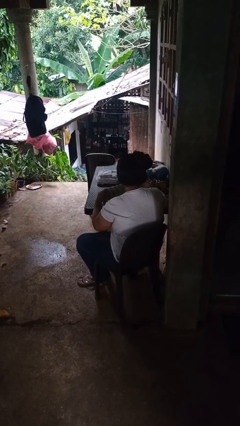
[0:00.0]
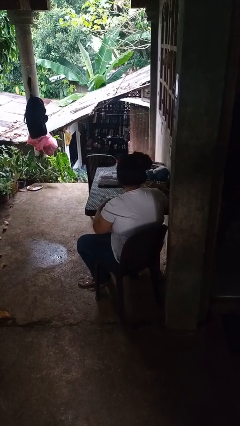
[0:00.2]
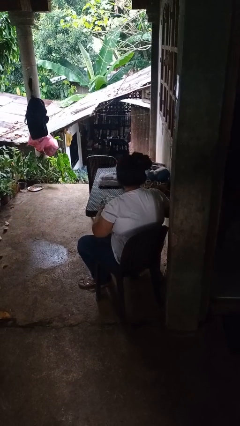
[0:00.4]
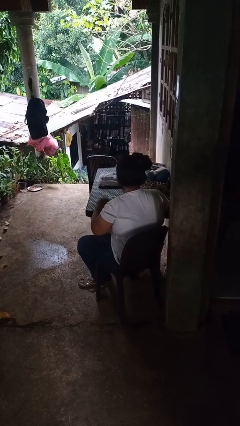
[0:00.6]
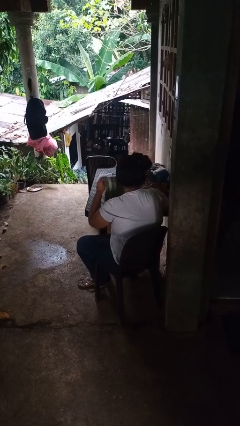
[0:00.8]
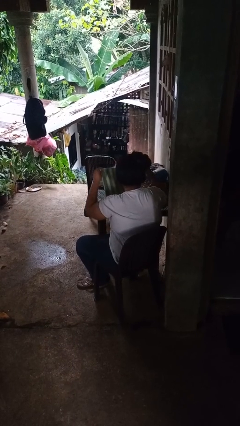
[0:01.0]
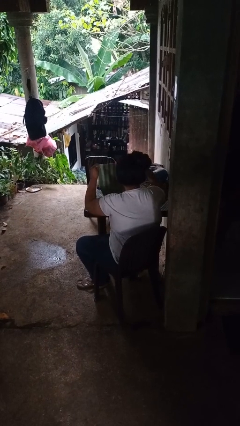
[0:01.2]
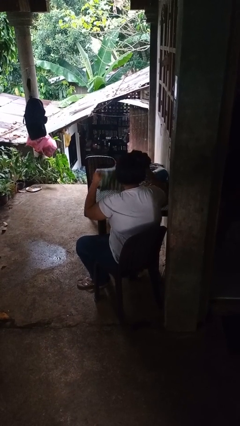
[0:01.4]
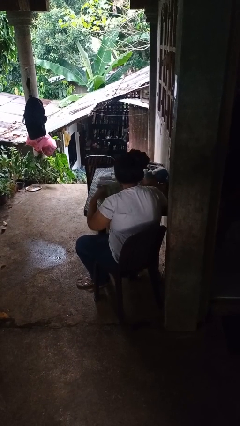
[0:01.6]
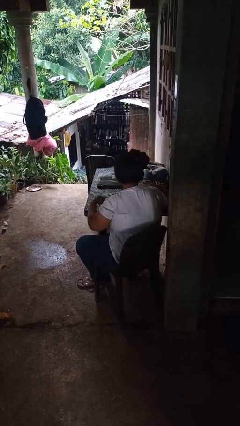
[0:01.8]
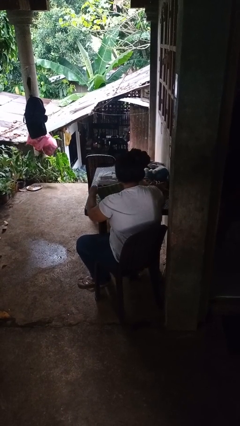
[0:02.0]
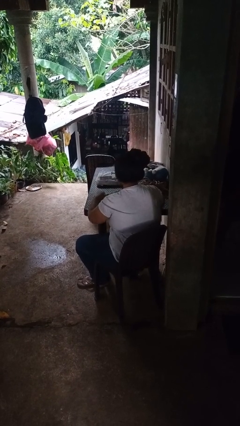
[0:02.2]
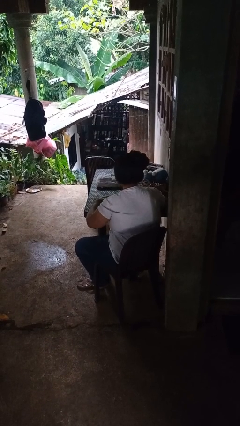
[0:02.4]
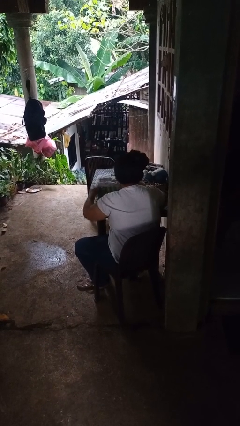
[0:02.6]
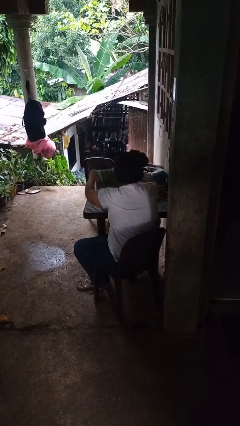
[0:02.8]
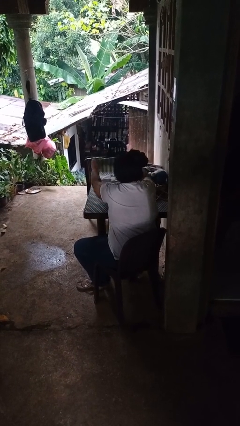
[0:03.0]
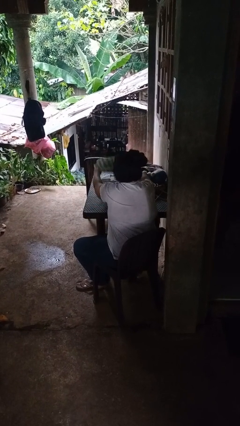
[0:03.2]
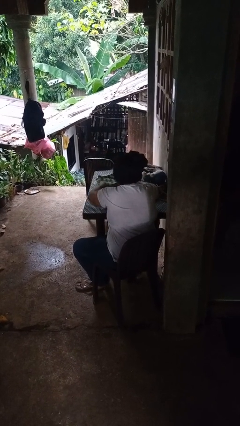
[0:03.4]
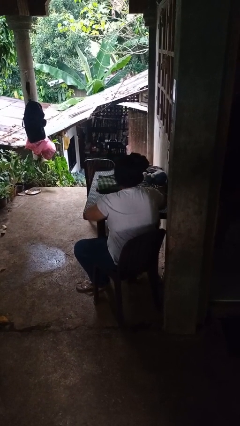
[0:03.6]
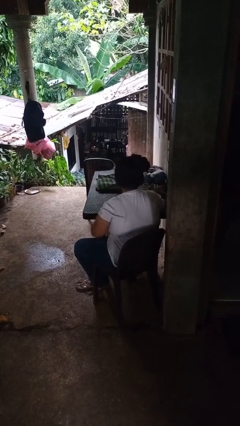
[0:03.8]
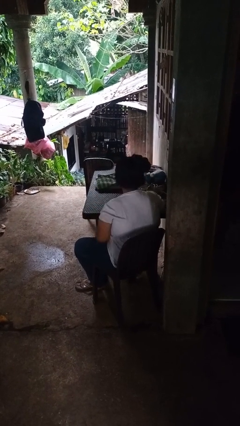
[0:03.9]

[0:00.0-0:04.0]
person folds towel

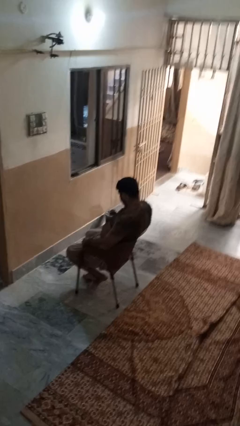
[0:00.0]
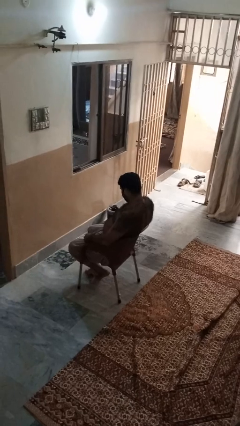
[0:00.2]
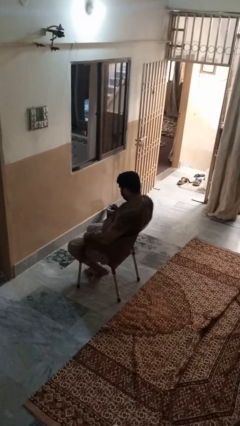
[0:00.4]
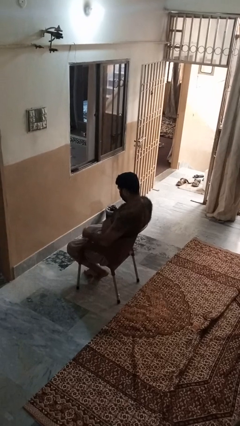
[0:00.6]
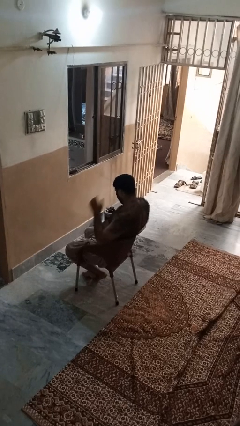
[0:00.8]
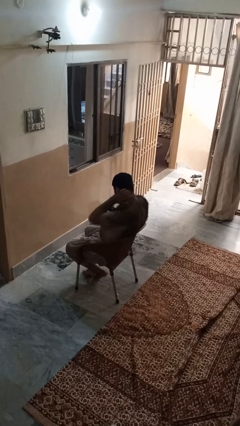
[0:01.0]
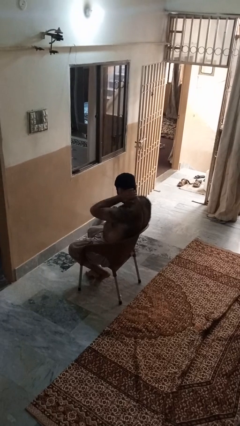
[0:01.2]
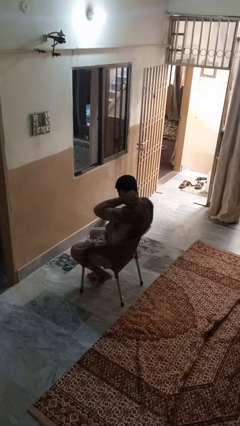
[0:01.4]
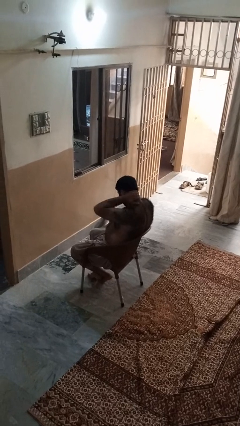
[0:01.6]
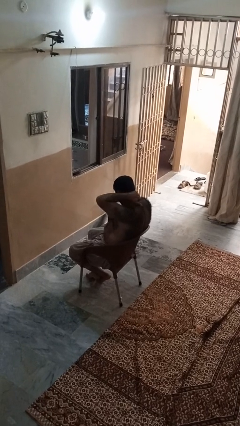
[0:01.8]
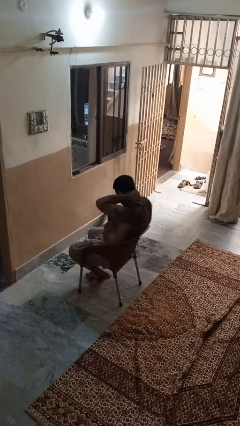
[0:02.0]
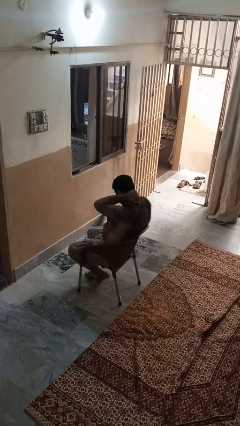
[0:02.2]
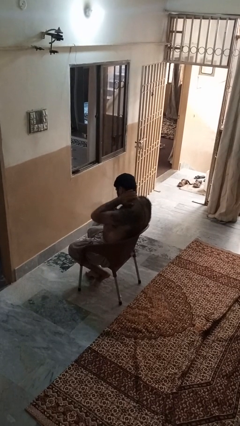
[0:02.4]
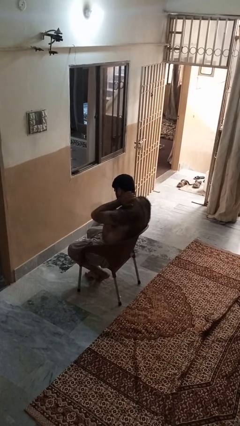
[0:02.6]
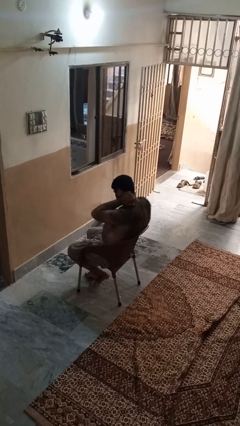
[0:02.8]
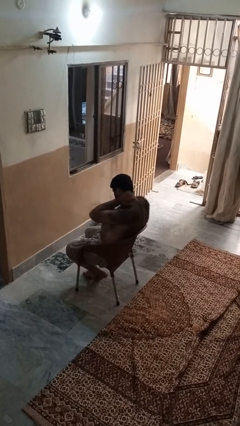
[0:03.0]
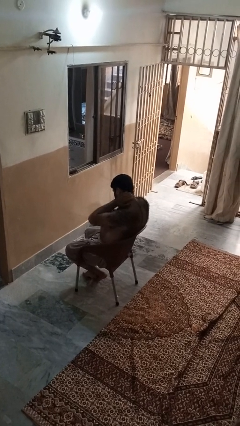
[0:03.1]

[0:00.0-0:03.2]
person rubs neck

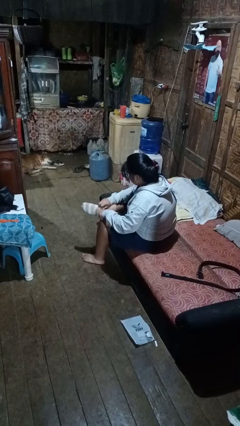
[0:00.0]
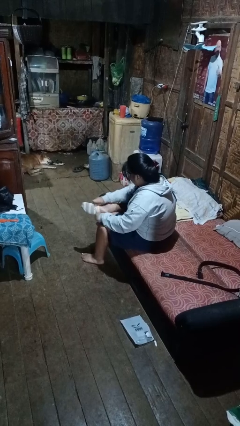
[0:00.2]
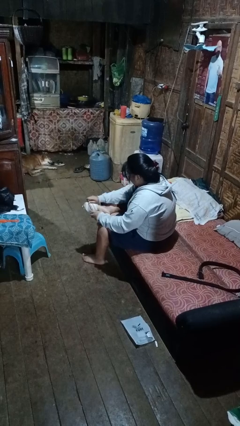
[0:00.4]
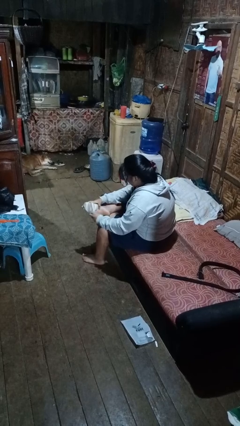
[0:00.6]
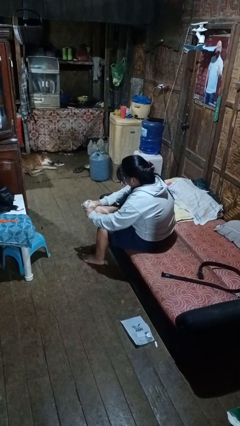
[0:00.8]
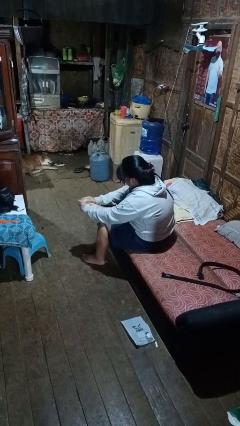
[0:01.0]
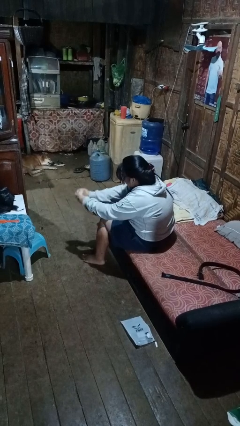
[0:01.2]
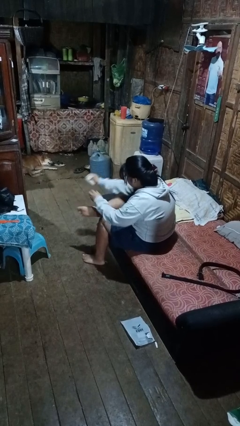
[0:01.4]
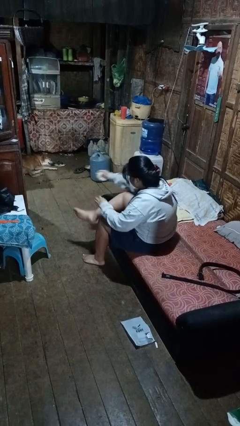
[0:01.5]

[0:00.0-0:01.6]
person takes off socks

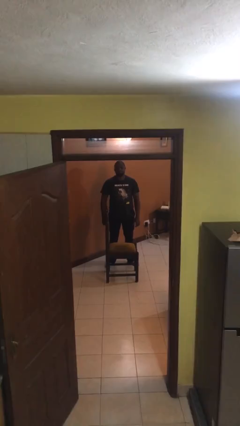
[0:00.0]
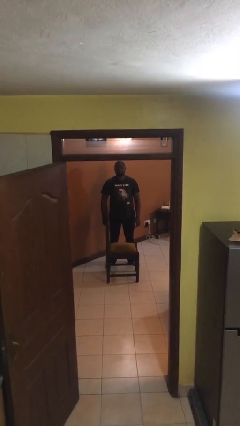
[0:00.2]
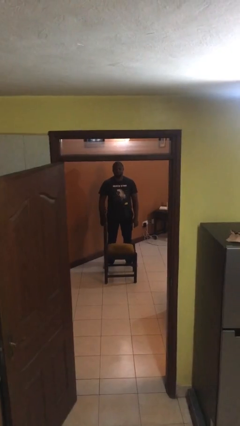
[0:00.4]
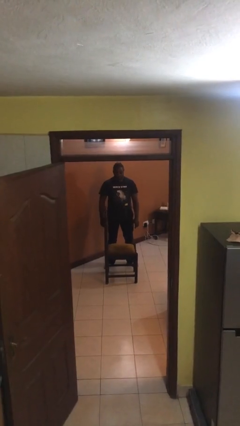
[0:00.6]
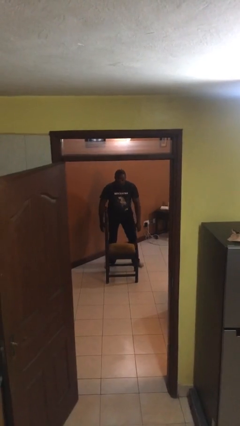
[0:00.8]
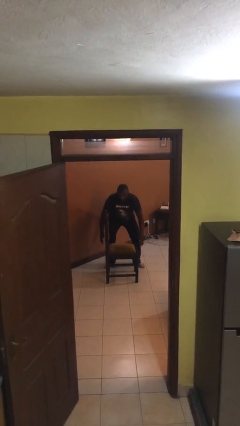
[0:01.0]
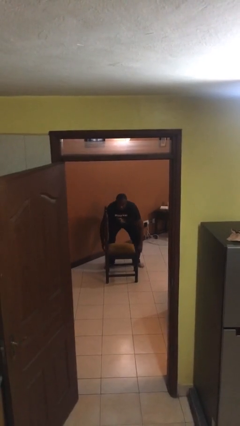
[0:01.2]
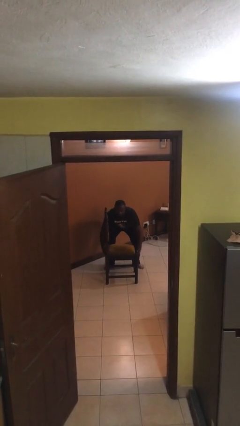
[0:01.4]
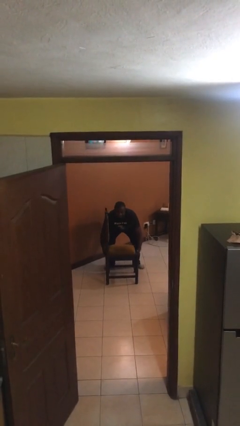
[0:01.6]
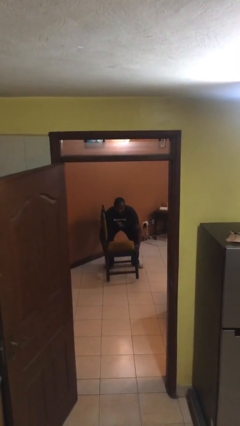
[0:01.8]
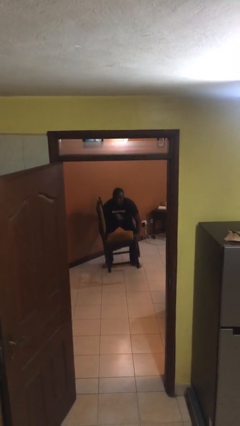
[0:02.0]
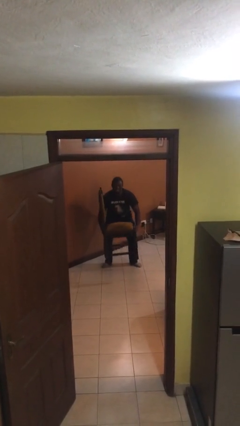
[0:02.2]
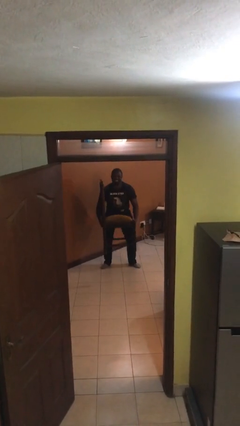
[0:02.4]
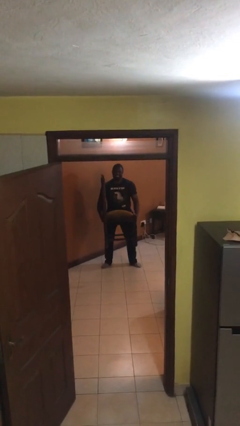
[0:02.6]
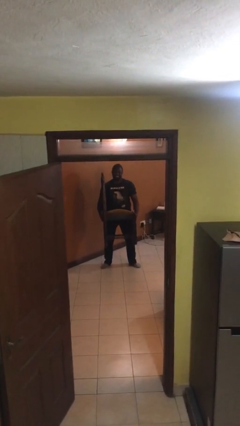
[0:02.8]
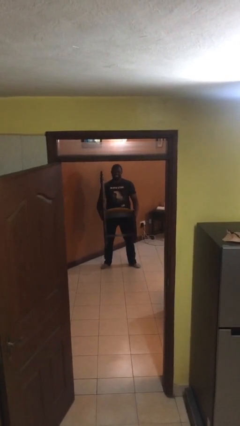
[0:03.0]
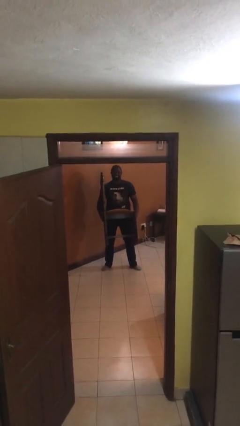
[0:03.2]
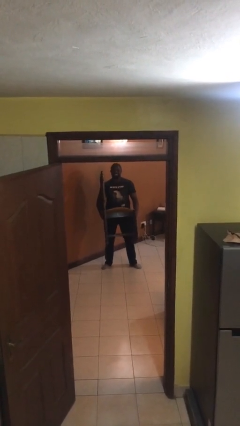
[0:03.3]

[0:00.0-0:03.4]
person picks up object from floor

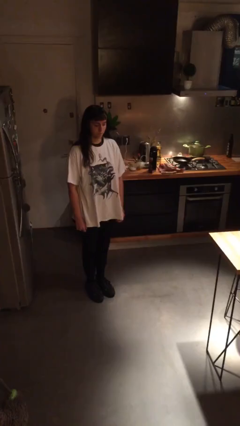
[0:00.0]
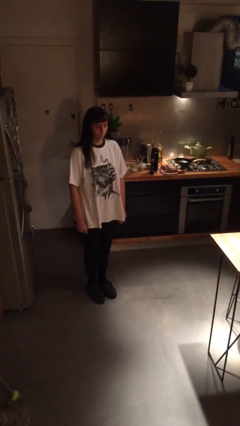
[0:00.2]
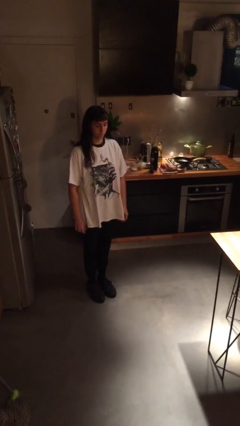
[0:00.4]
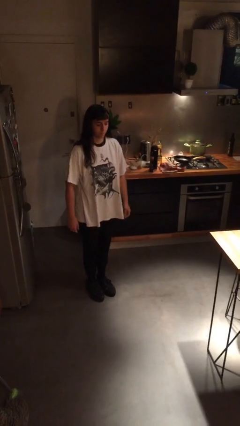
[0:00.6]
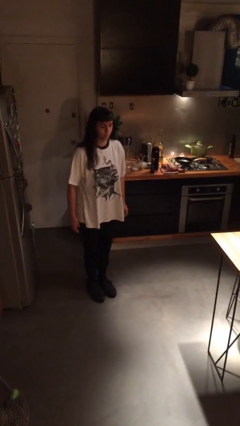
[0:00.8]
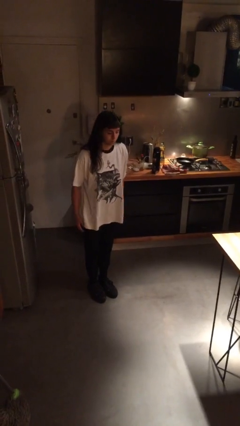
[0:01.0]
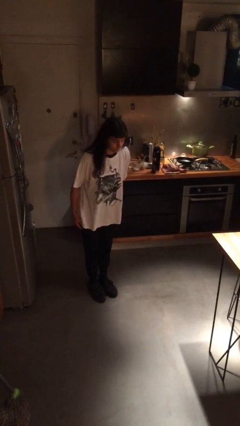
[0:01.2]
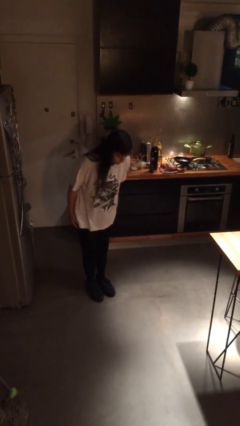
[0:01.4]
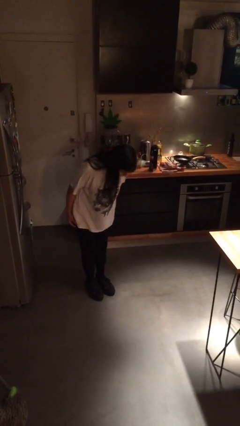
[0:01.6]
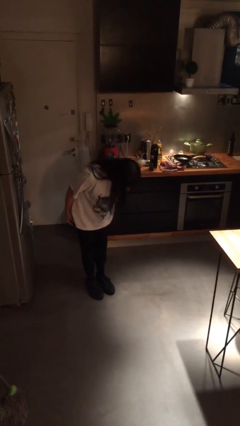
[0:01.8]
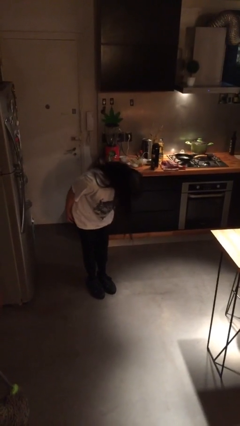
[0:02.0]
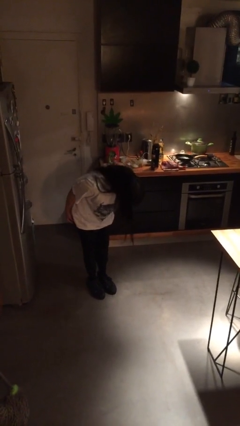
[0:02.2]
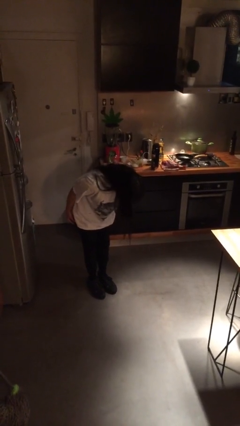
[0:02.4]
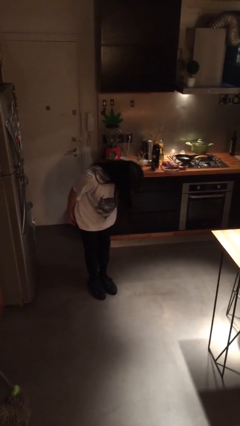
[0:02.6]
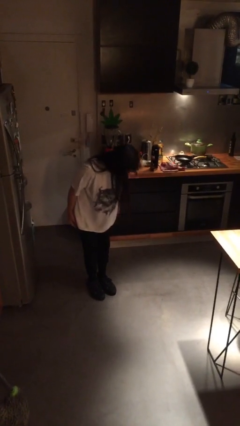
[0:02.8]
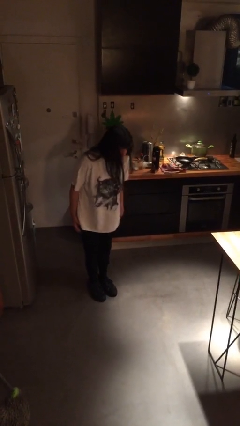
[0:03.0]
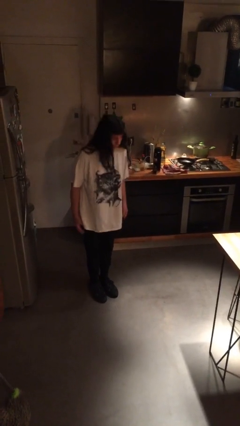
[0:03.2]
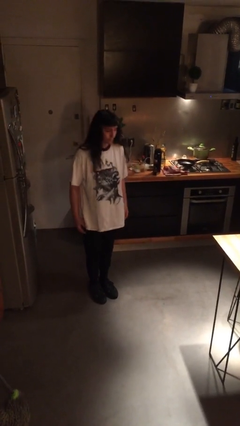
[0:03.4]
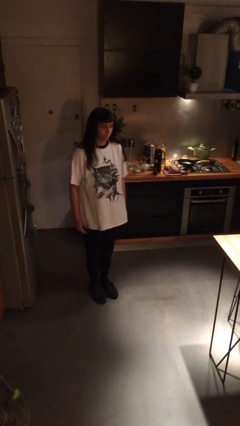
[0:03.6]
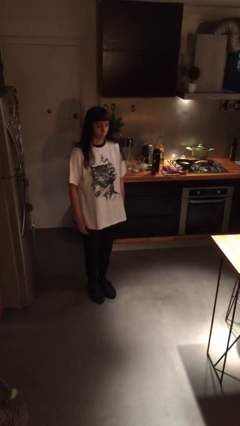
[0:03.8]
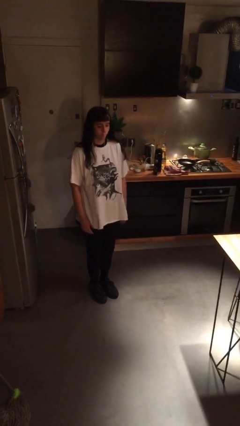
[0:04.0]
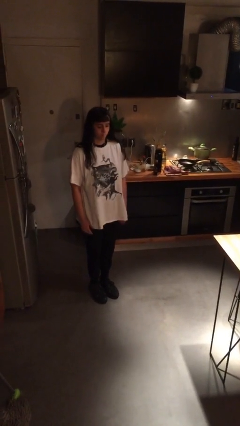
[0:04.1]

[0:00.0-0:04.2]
person bows

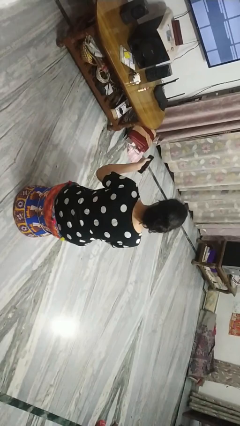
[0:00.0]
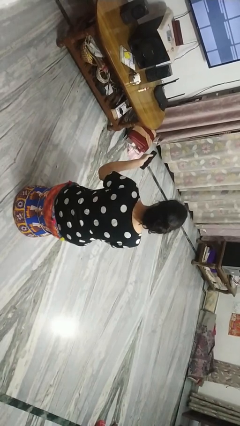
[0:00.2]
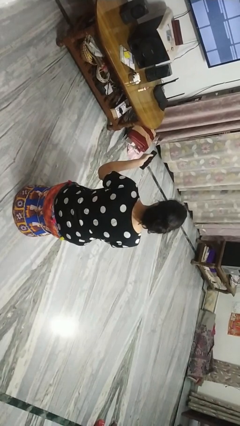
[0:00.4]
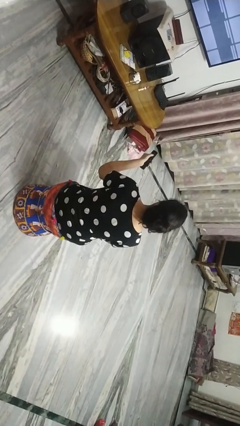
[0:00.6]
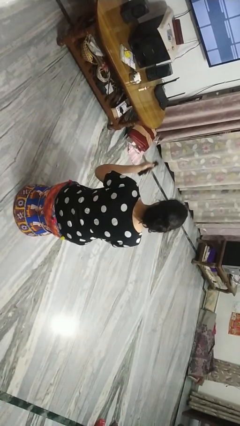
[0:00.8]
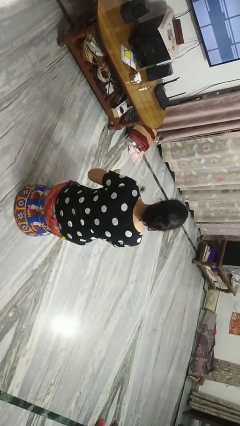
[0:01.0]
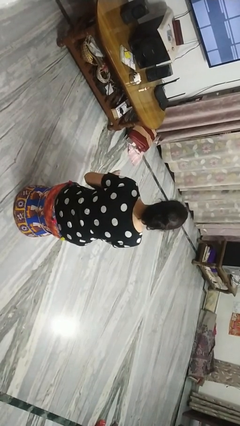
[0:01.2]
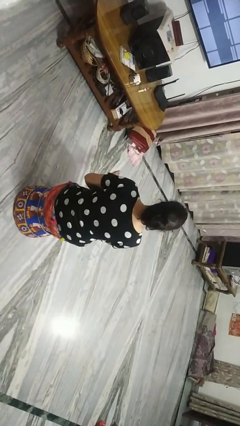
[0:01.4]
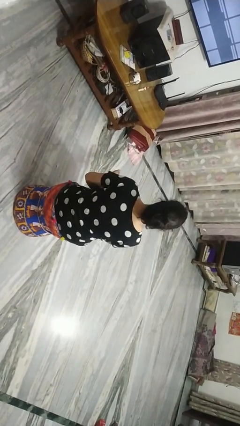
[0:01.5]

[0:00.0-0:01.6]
person uses television remote
